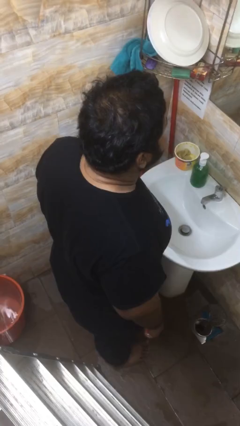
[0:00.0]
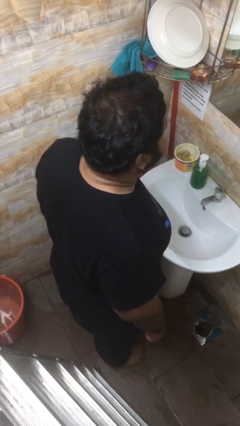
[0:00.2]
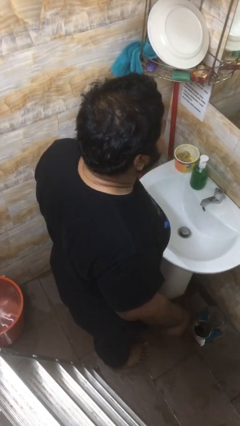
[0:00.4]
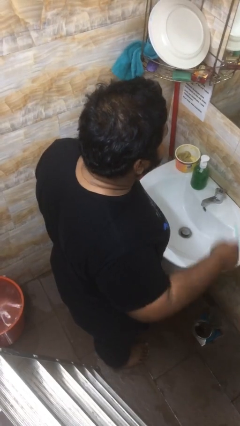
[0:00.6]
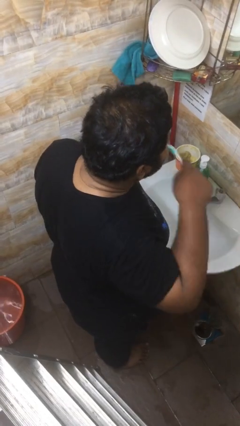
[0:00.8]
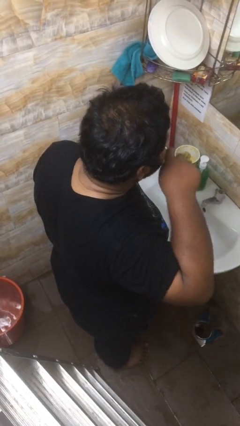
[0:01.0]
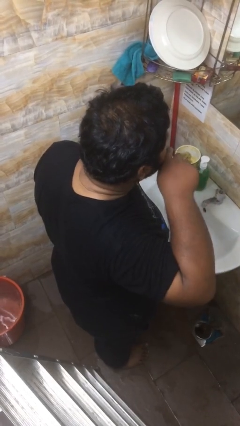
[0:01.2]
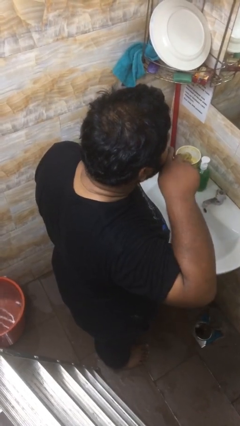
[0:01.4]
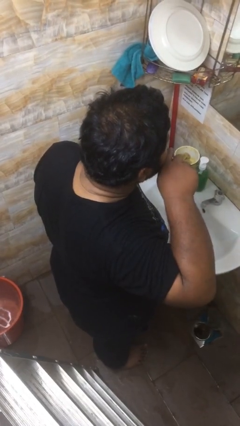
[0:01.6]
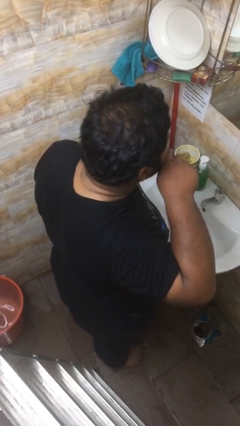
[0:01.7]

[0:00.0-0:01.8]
person brushes teeth

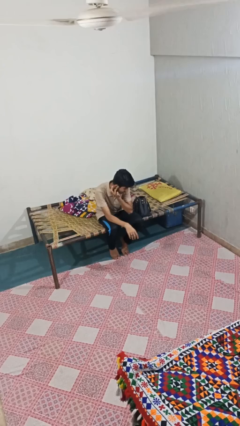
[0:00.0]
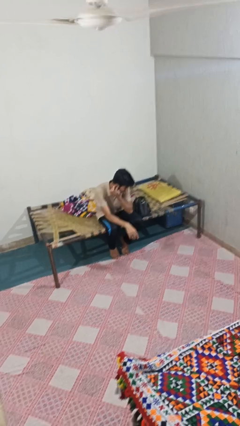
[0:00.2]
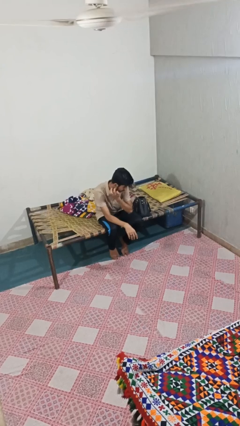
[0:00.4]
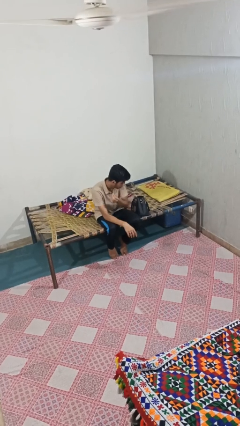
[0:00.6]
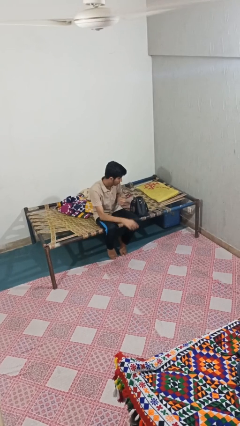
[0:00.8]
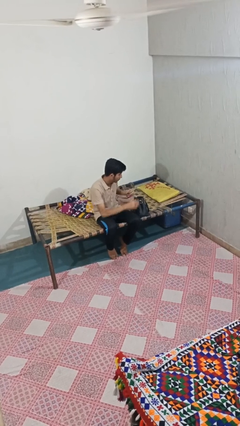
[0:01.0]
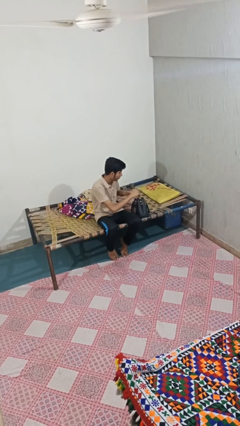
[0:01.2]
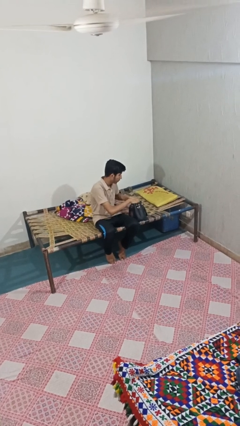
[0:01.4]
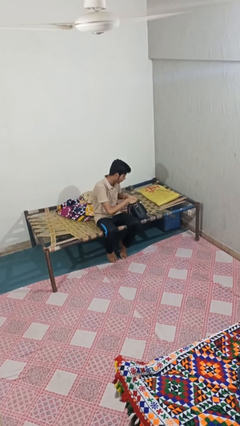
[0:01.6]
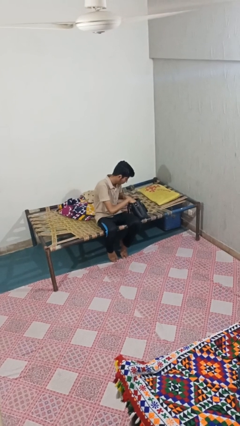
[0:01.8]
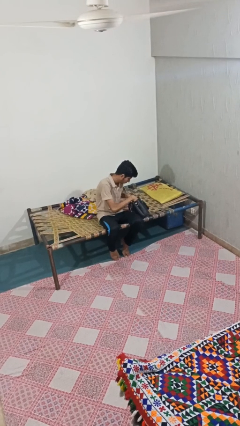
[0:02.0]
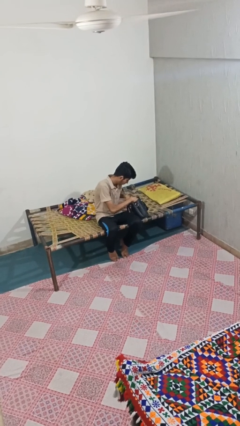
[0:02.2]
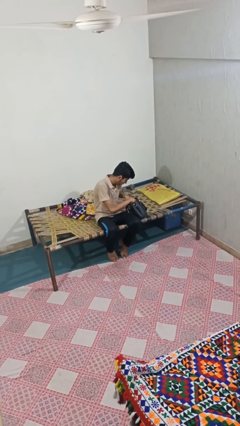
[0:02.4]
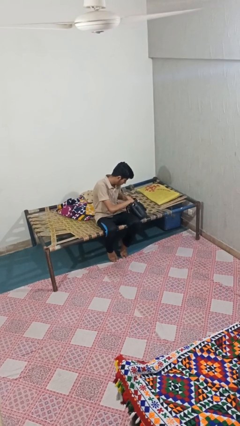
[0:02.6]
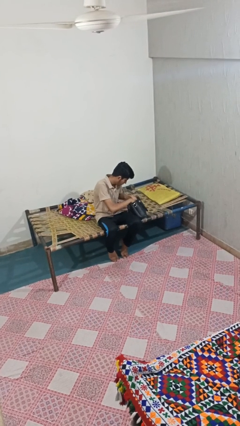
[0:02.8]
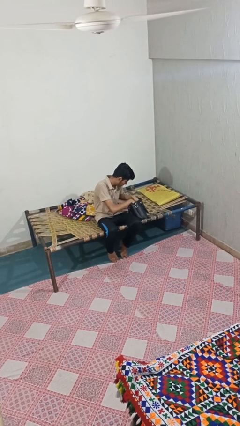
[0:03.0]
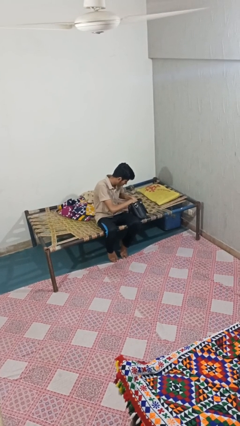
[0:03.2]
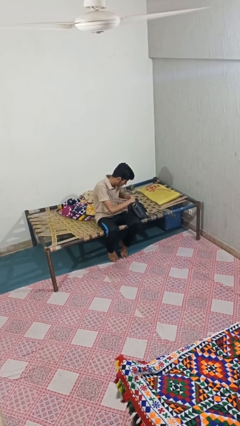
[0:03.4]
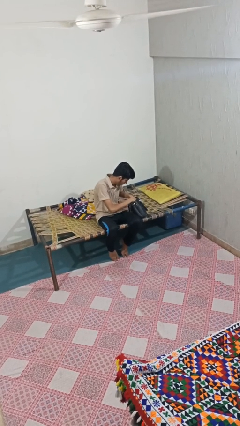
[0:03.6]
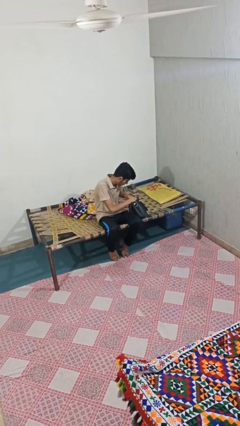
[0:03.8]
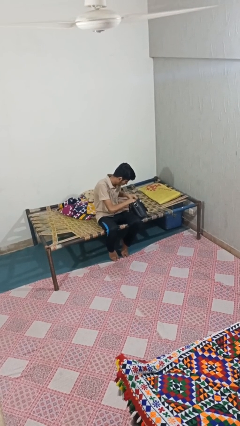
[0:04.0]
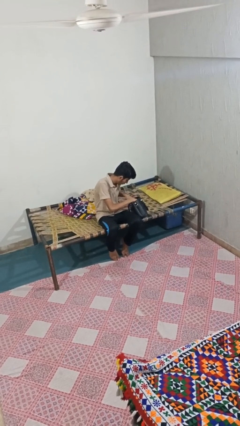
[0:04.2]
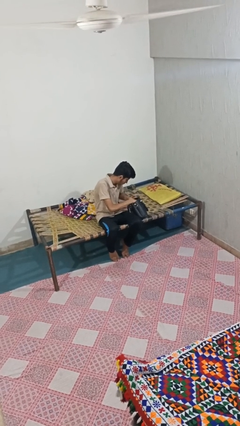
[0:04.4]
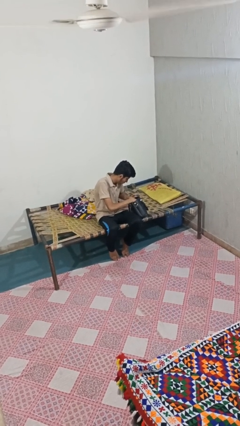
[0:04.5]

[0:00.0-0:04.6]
person searches in purse

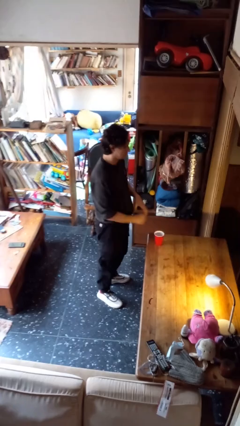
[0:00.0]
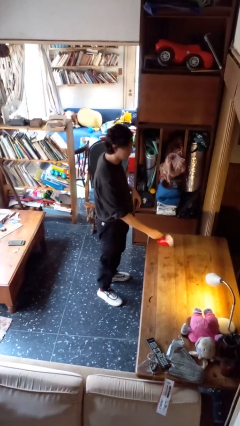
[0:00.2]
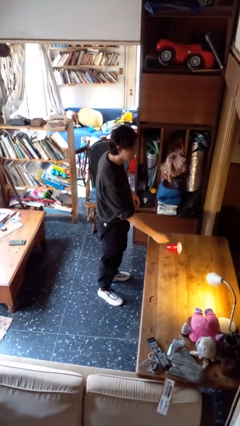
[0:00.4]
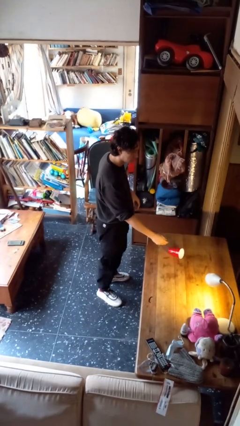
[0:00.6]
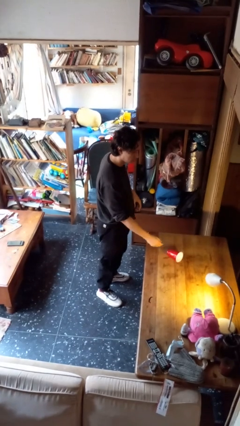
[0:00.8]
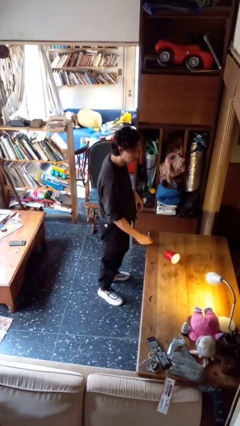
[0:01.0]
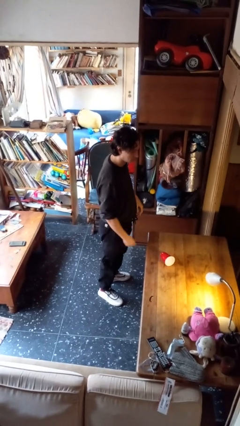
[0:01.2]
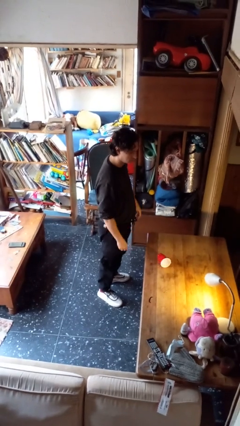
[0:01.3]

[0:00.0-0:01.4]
person knocks over glass

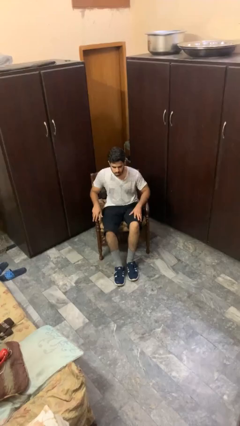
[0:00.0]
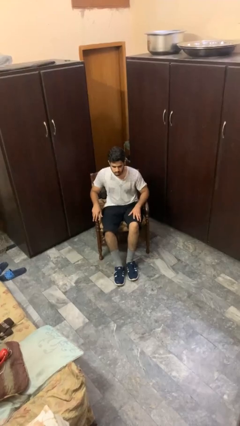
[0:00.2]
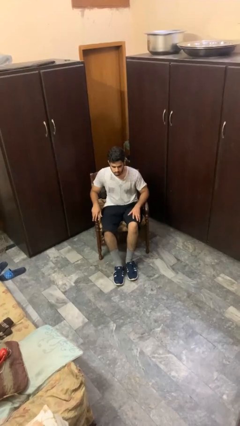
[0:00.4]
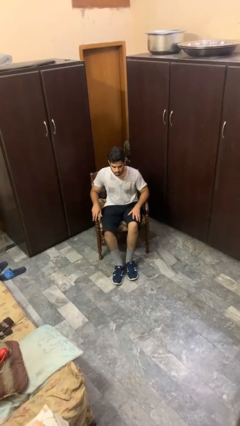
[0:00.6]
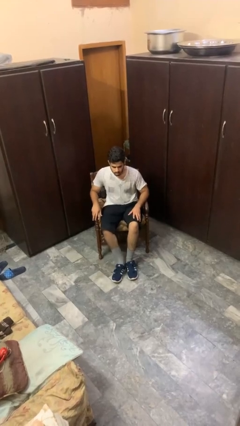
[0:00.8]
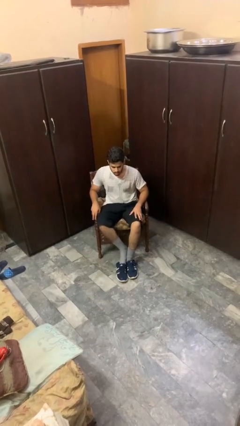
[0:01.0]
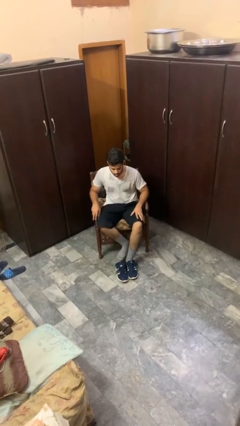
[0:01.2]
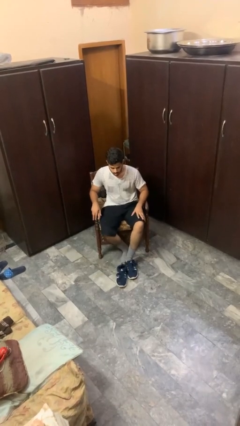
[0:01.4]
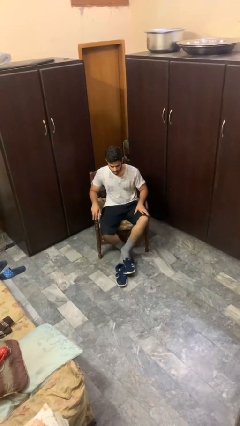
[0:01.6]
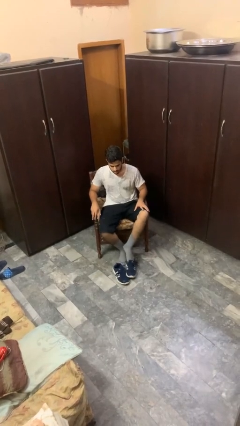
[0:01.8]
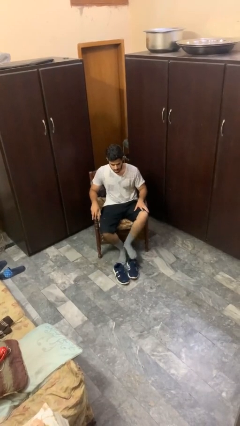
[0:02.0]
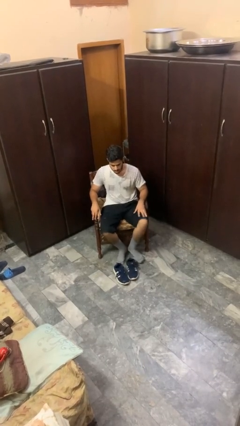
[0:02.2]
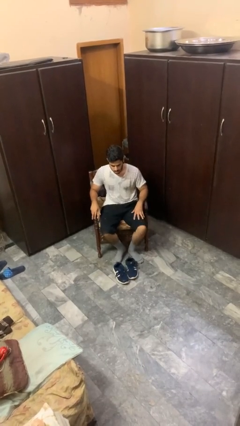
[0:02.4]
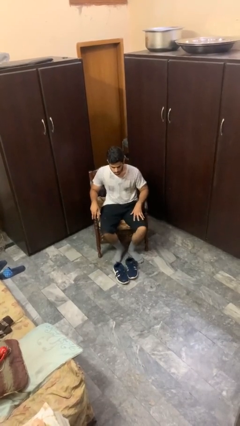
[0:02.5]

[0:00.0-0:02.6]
person takes off shoes

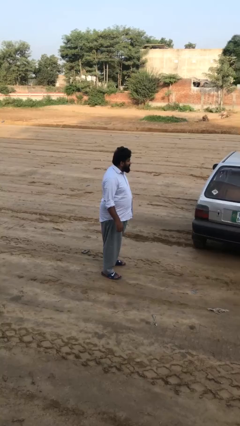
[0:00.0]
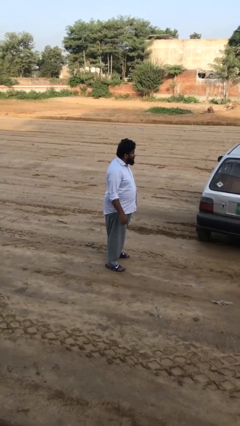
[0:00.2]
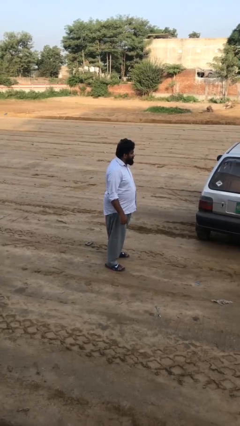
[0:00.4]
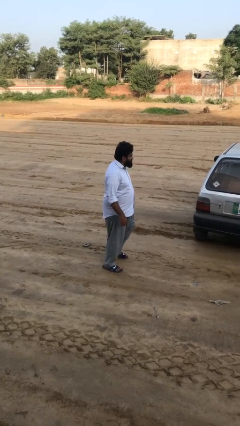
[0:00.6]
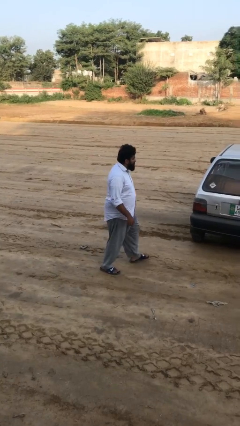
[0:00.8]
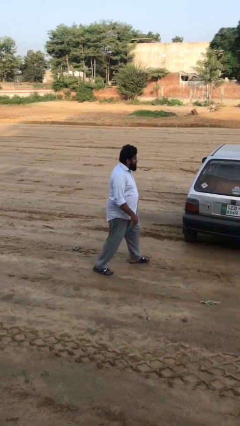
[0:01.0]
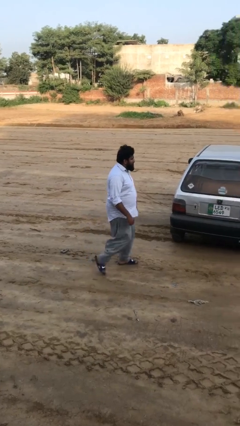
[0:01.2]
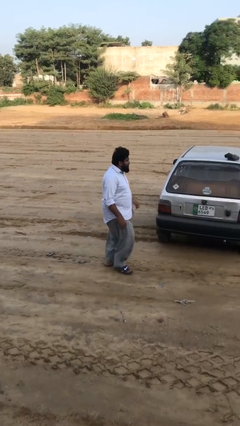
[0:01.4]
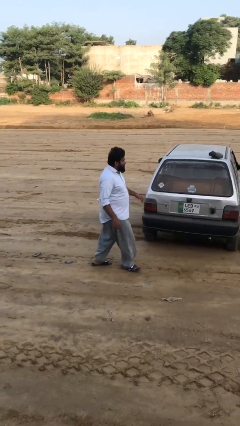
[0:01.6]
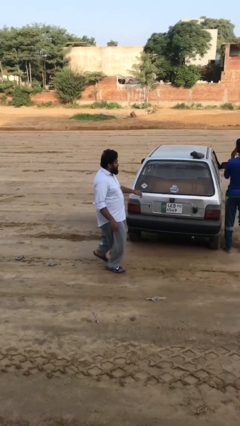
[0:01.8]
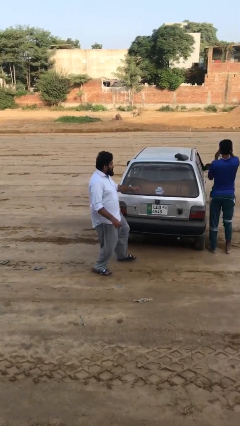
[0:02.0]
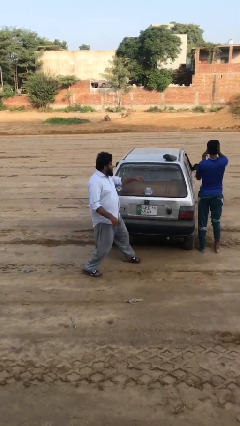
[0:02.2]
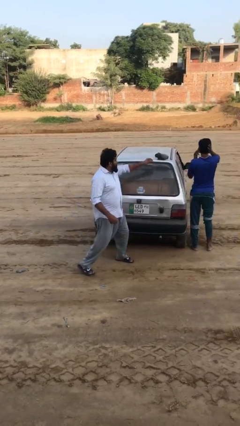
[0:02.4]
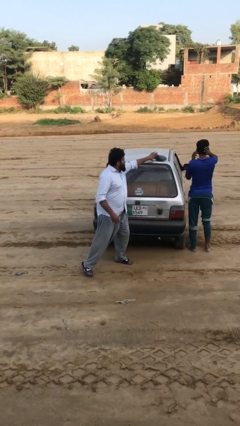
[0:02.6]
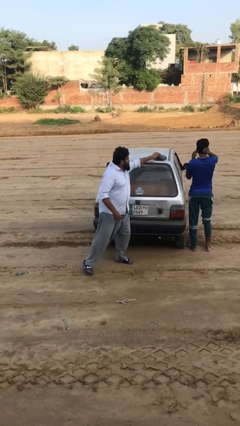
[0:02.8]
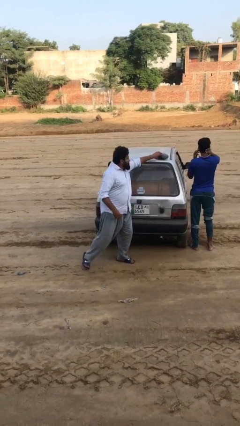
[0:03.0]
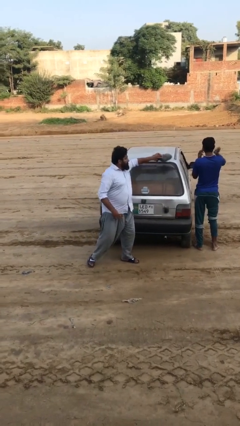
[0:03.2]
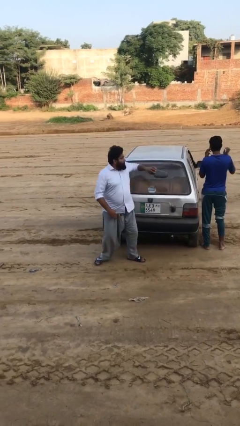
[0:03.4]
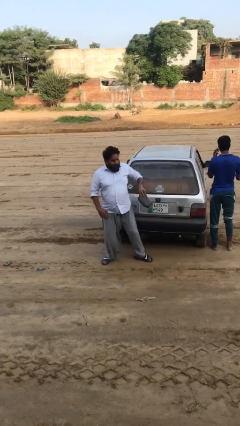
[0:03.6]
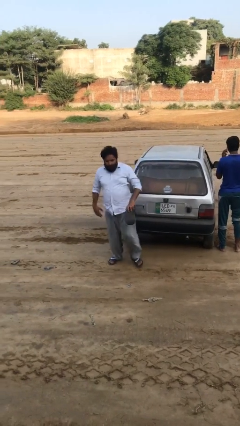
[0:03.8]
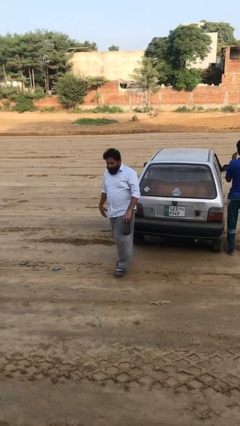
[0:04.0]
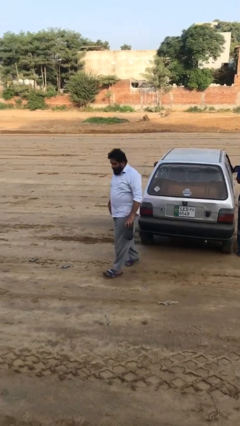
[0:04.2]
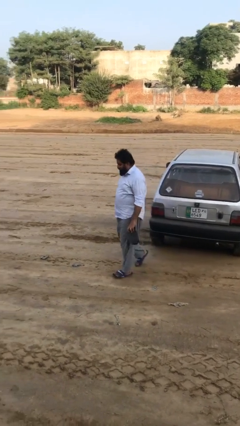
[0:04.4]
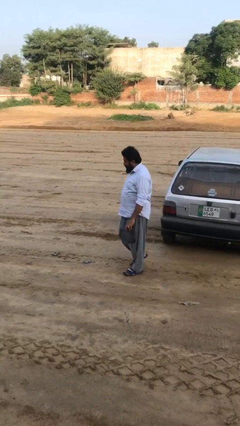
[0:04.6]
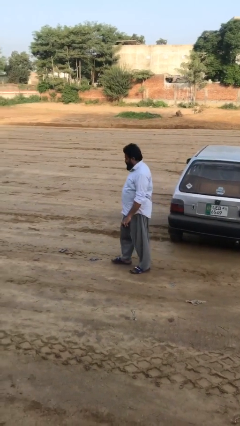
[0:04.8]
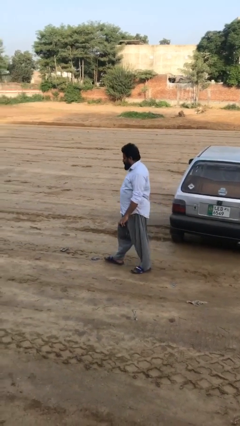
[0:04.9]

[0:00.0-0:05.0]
person steals object from person

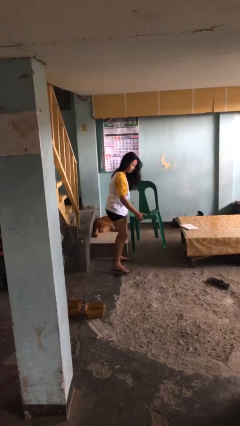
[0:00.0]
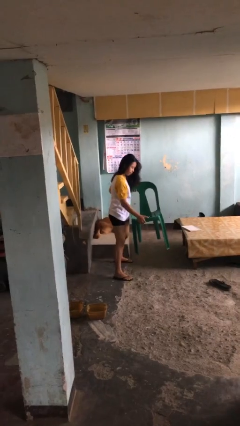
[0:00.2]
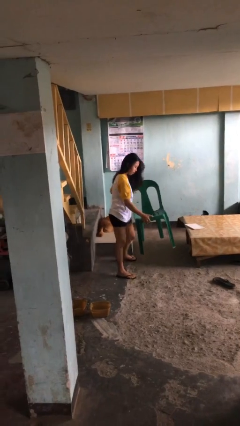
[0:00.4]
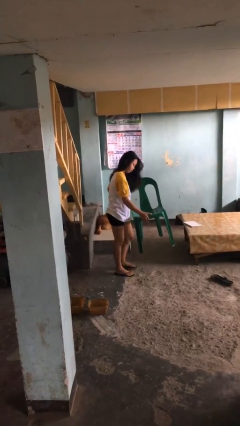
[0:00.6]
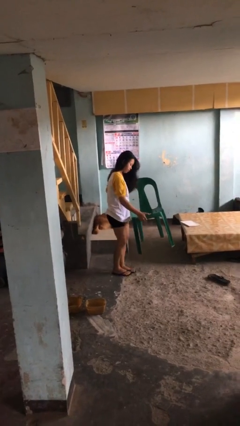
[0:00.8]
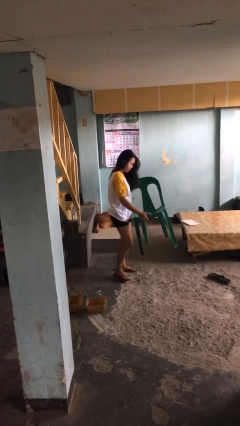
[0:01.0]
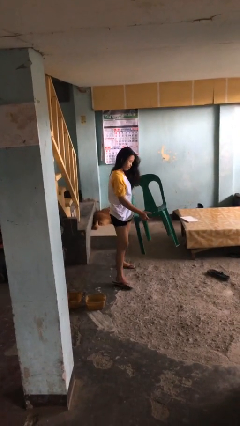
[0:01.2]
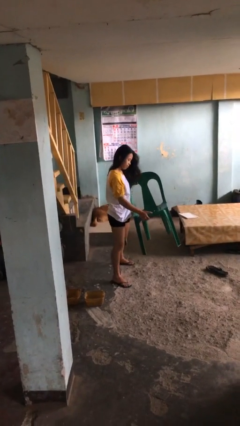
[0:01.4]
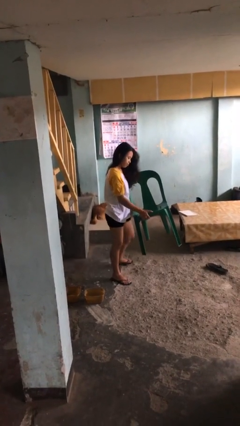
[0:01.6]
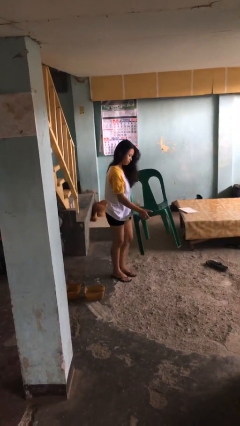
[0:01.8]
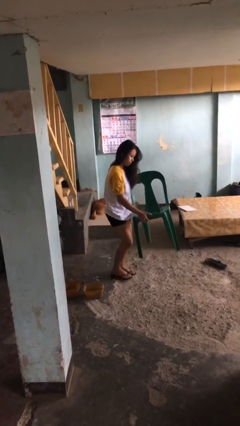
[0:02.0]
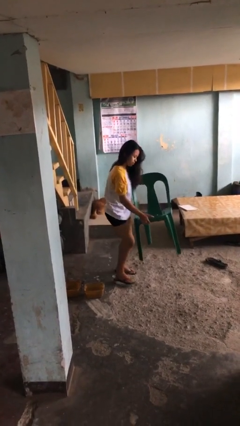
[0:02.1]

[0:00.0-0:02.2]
person carries heavy object
